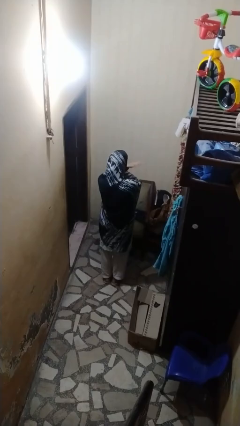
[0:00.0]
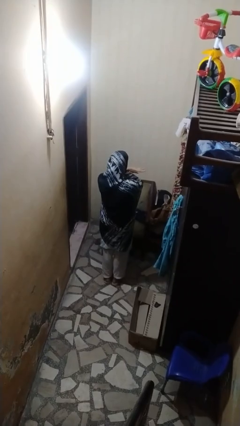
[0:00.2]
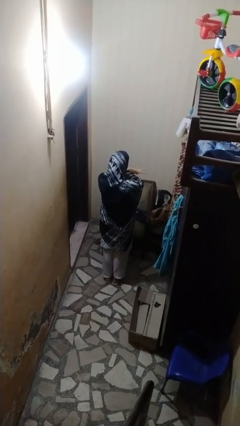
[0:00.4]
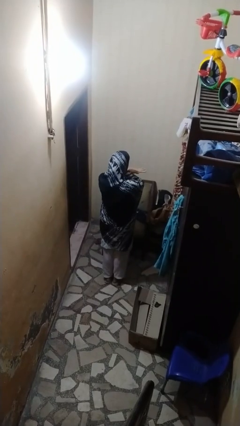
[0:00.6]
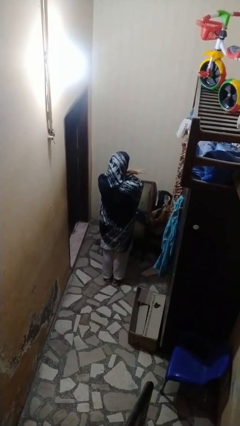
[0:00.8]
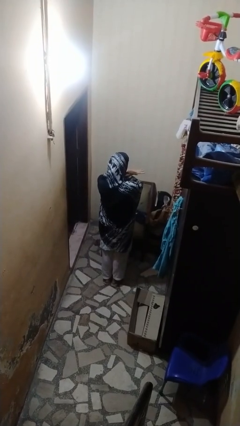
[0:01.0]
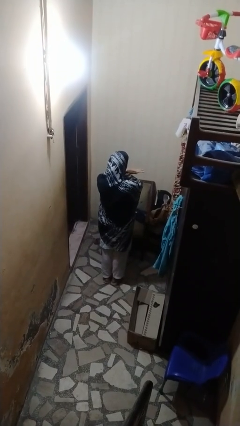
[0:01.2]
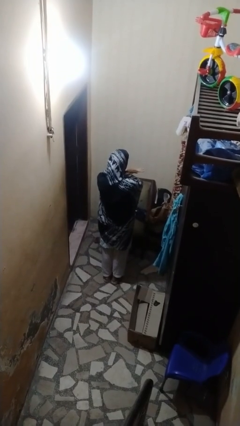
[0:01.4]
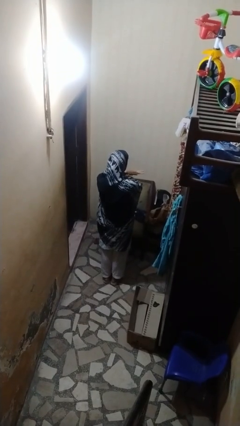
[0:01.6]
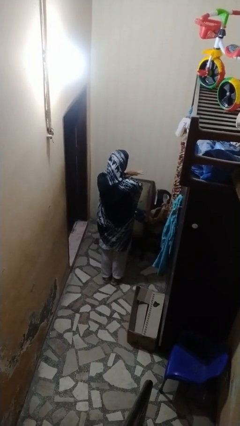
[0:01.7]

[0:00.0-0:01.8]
person gestures arms x

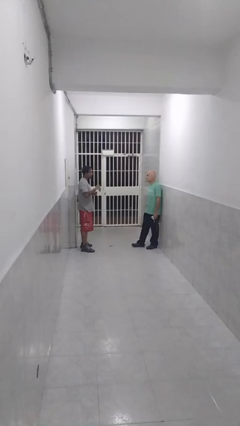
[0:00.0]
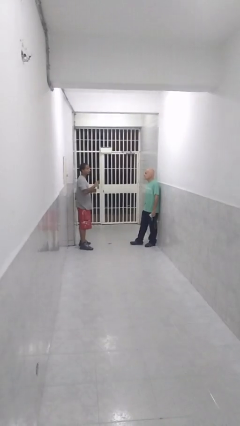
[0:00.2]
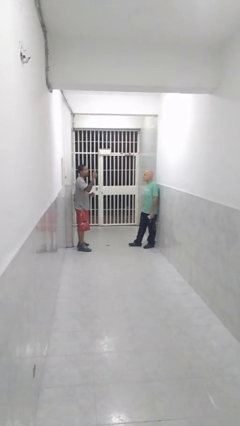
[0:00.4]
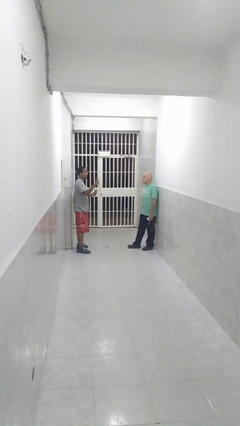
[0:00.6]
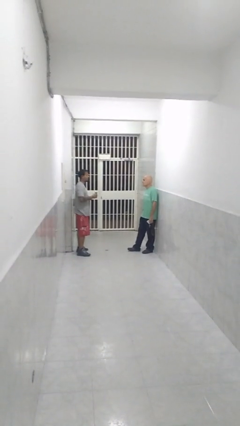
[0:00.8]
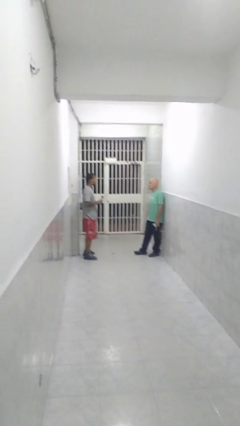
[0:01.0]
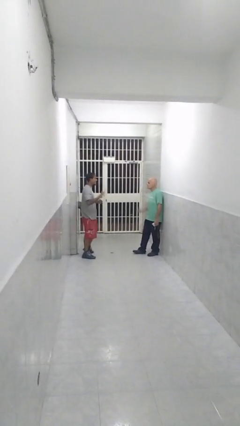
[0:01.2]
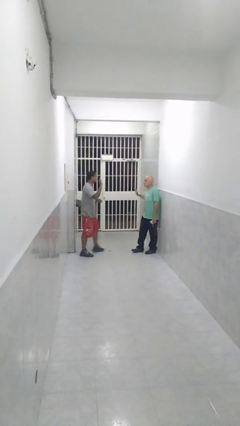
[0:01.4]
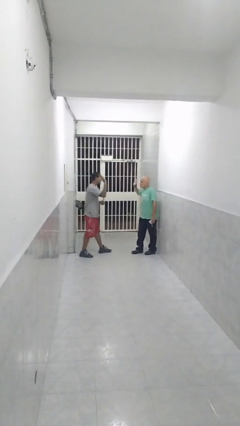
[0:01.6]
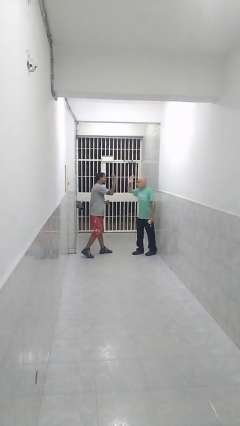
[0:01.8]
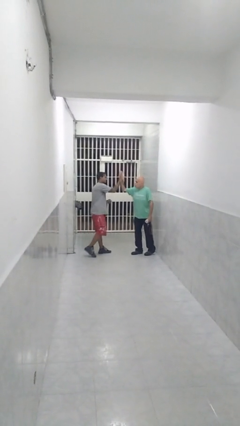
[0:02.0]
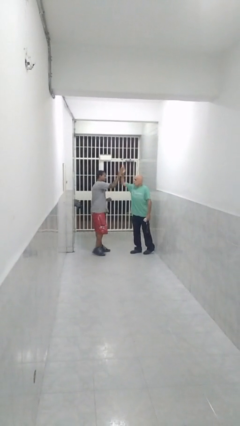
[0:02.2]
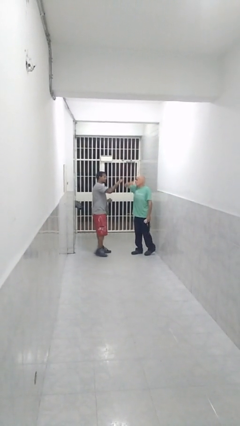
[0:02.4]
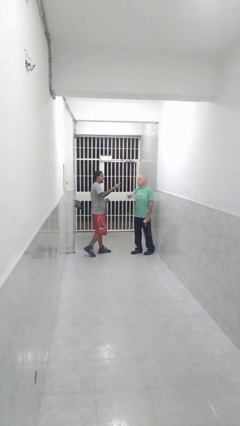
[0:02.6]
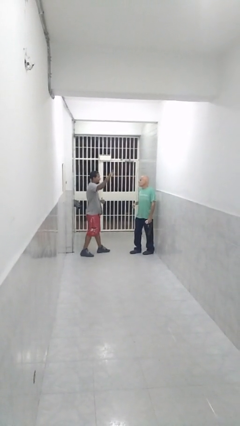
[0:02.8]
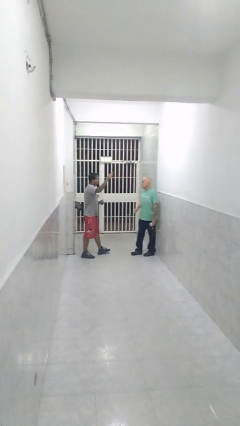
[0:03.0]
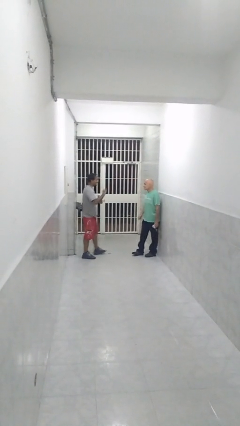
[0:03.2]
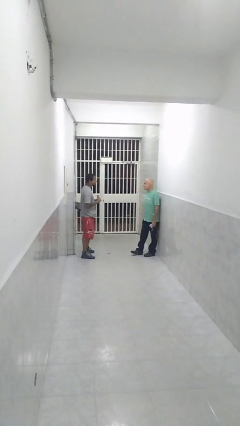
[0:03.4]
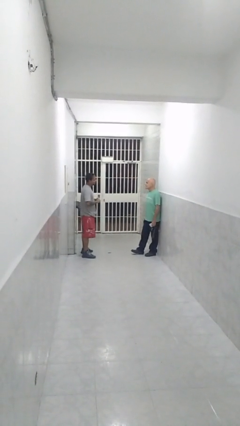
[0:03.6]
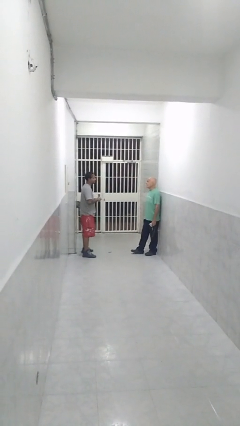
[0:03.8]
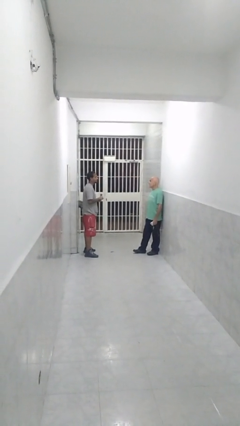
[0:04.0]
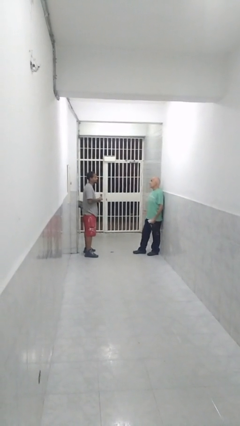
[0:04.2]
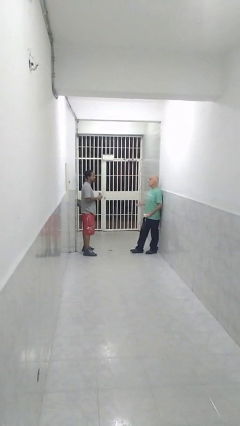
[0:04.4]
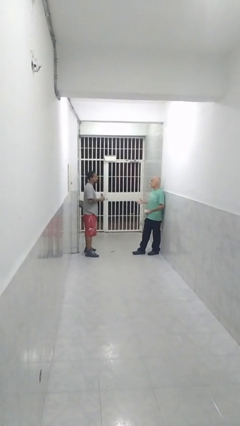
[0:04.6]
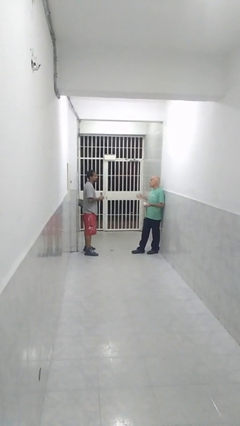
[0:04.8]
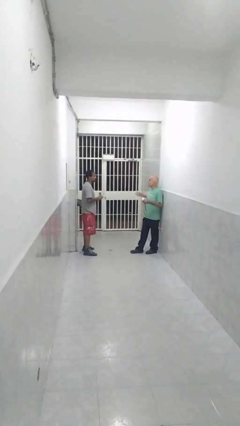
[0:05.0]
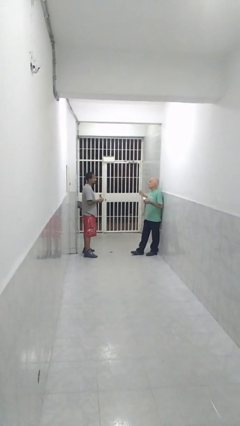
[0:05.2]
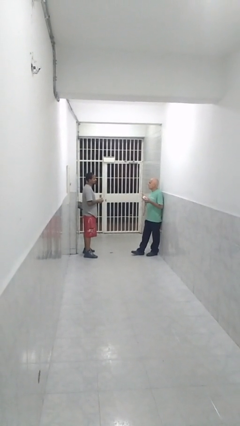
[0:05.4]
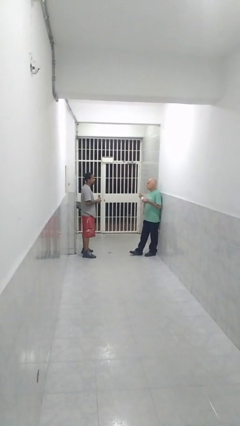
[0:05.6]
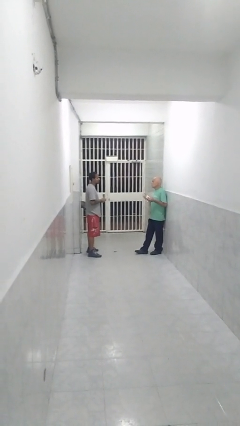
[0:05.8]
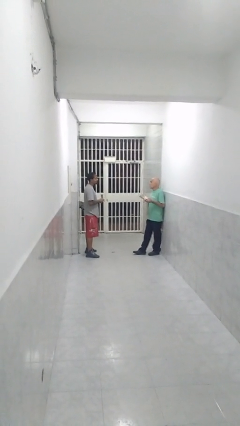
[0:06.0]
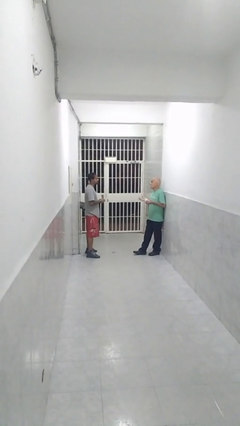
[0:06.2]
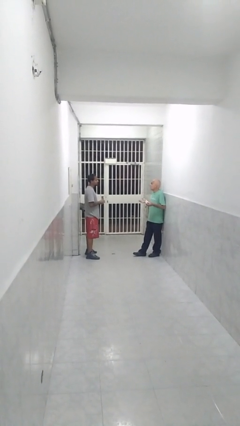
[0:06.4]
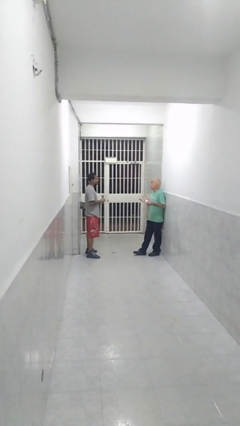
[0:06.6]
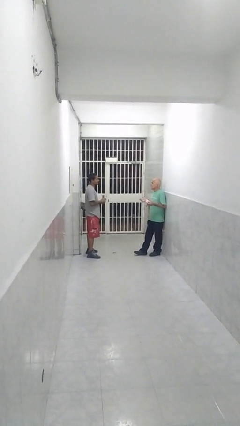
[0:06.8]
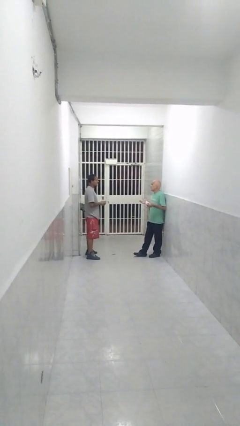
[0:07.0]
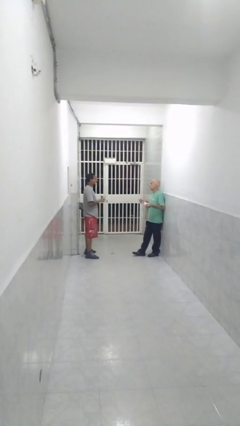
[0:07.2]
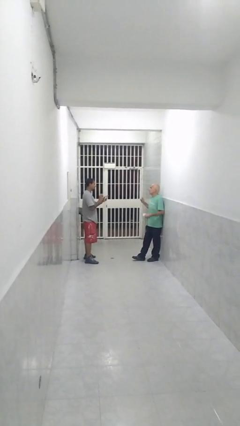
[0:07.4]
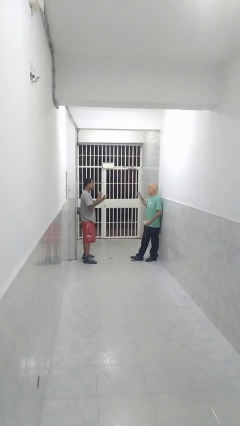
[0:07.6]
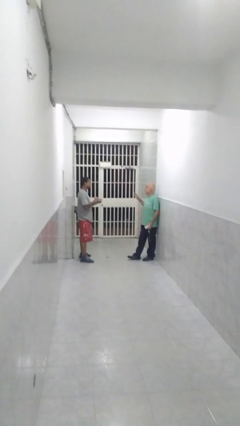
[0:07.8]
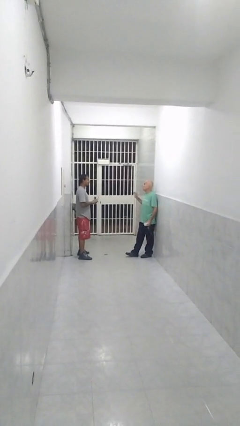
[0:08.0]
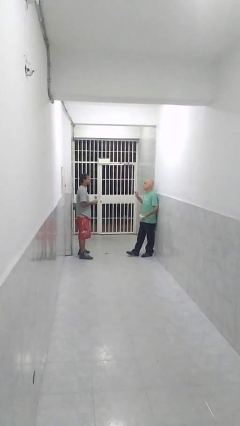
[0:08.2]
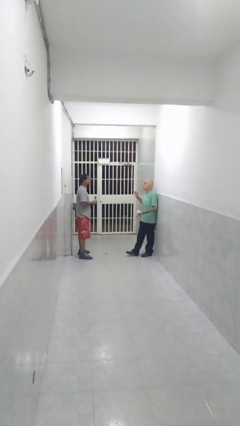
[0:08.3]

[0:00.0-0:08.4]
person highfives hand

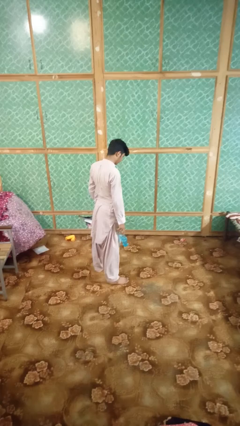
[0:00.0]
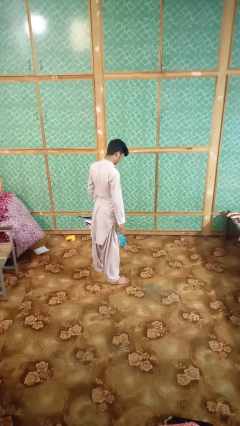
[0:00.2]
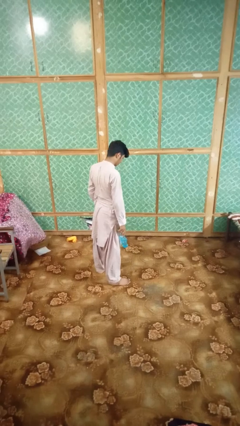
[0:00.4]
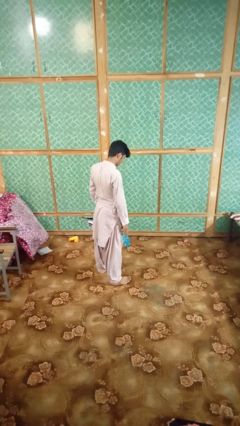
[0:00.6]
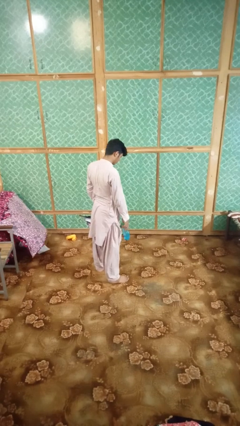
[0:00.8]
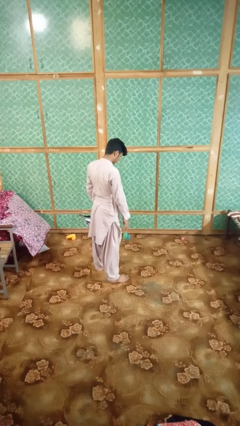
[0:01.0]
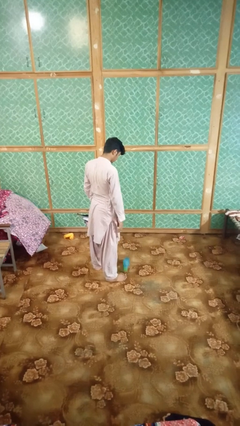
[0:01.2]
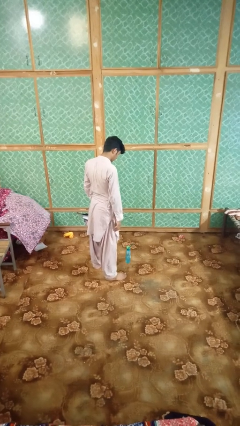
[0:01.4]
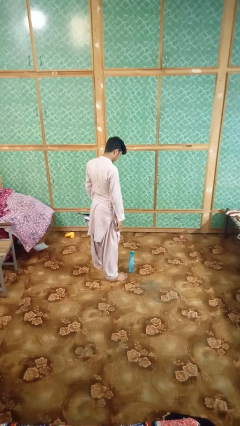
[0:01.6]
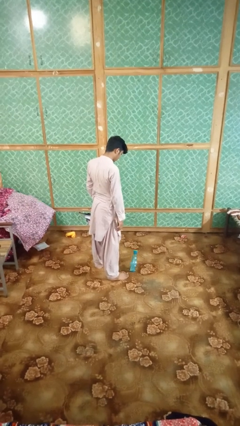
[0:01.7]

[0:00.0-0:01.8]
person drops object

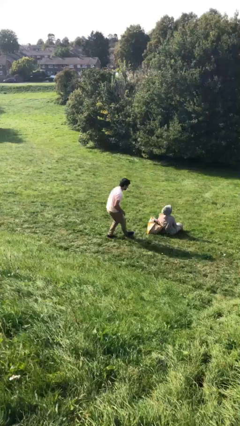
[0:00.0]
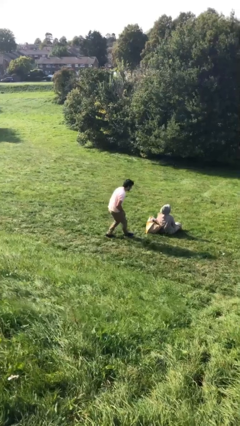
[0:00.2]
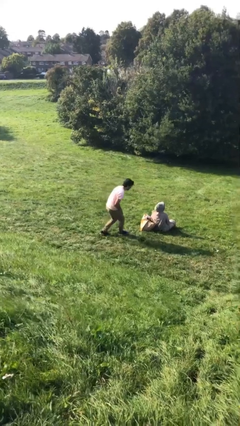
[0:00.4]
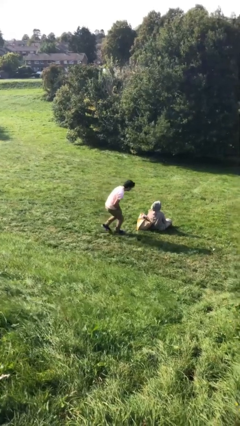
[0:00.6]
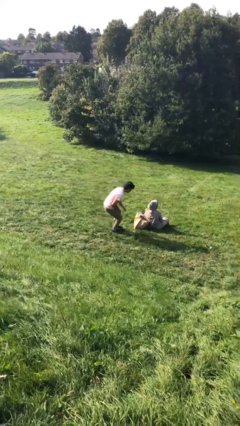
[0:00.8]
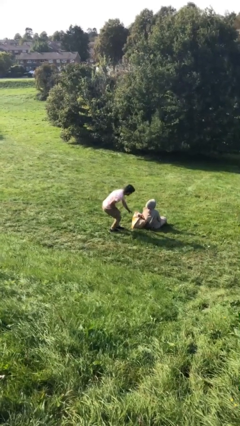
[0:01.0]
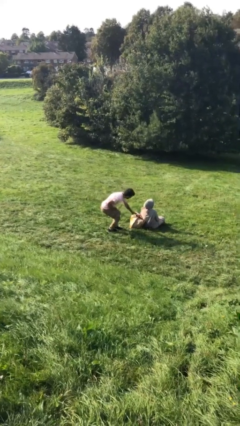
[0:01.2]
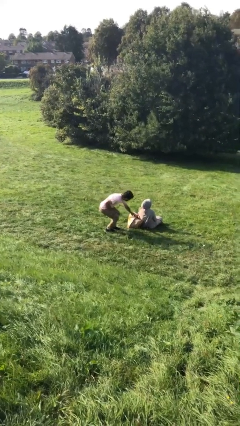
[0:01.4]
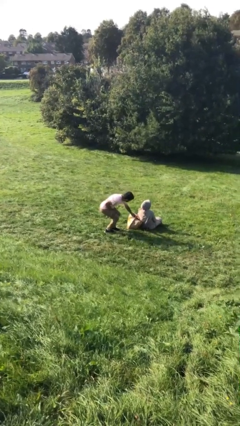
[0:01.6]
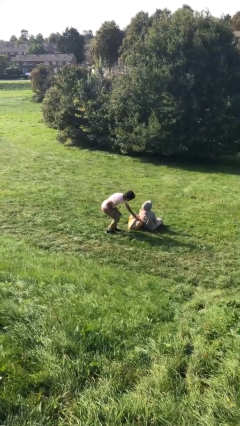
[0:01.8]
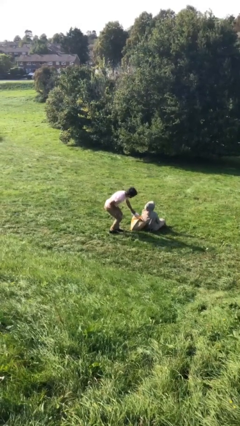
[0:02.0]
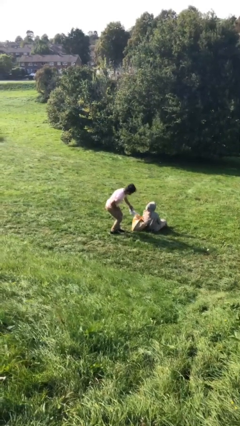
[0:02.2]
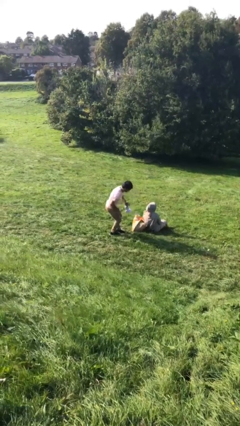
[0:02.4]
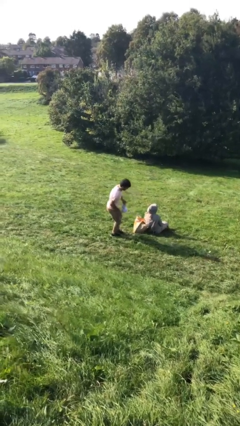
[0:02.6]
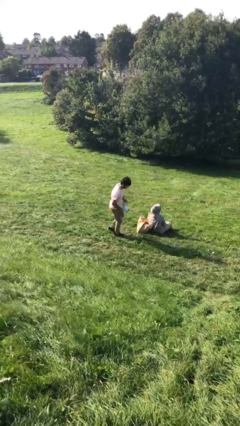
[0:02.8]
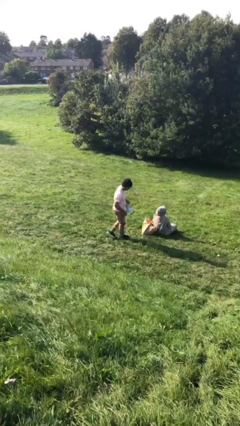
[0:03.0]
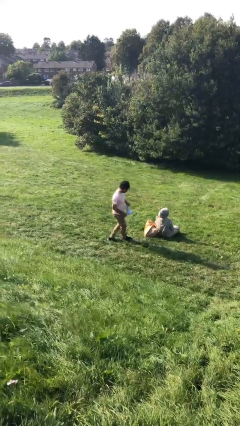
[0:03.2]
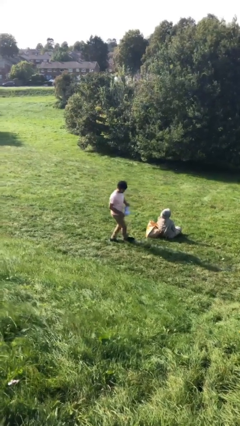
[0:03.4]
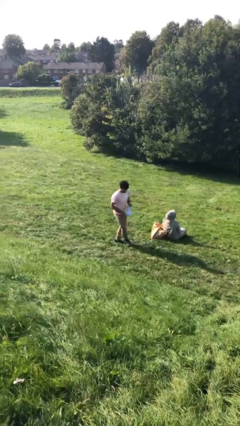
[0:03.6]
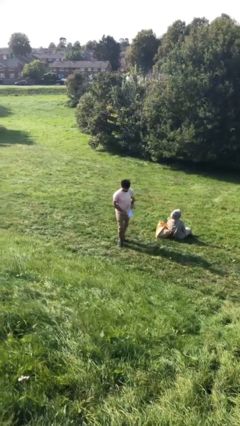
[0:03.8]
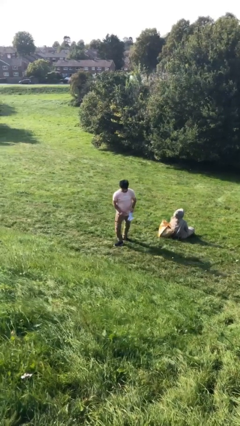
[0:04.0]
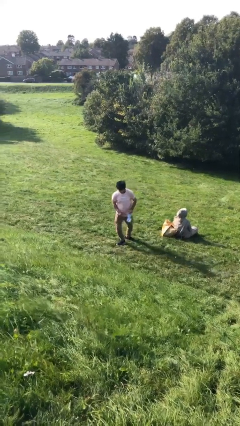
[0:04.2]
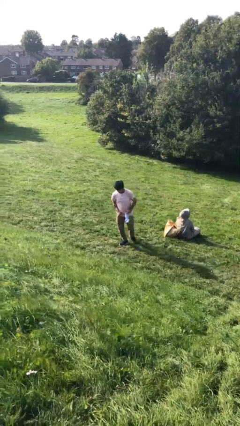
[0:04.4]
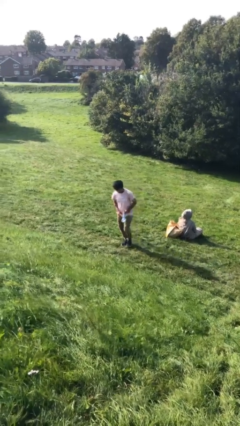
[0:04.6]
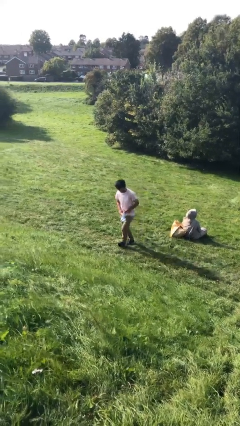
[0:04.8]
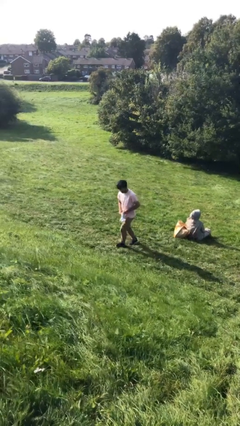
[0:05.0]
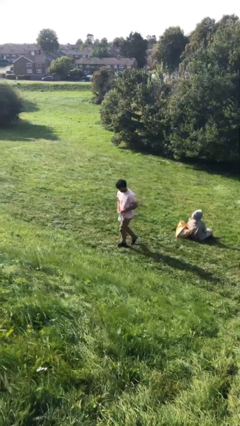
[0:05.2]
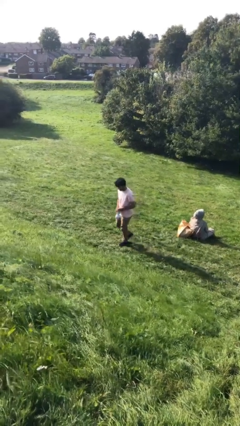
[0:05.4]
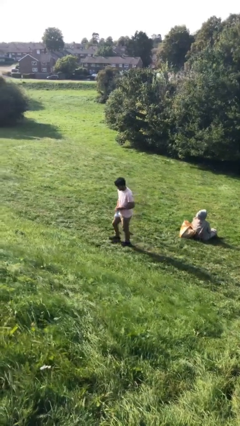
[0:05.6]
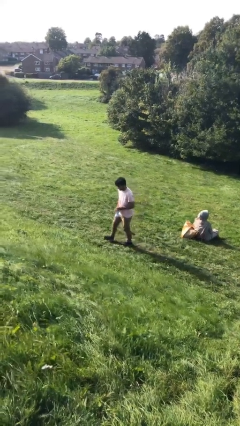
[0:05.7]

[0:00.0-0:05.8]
person steals object from person
